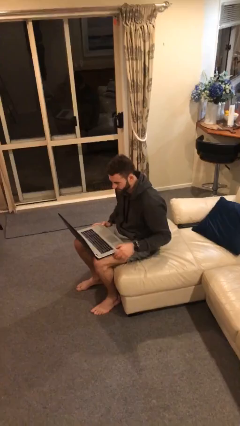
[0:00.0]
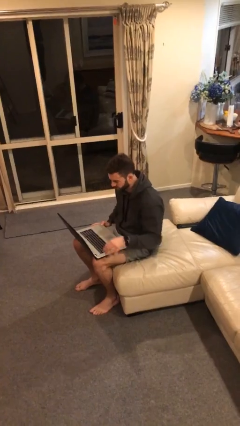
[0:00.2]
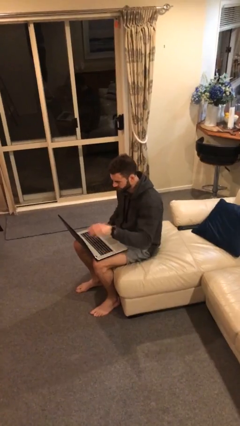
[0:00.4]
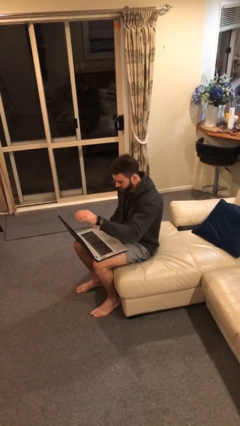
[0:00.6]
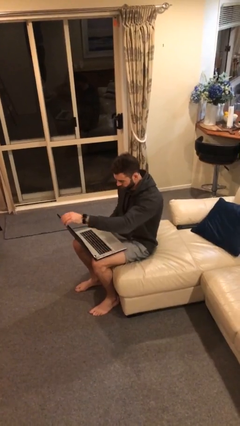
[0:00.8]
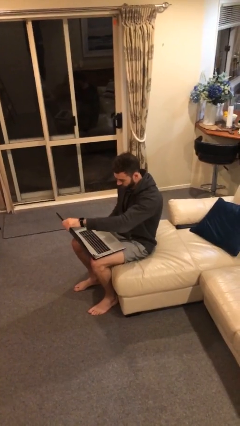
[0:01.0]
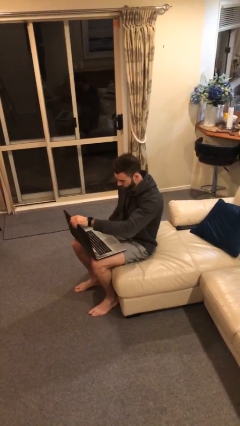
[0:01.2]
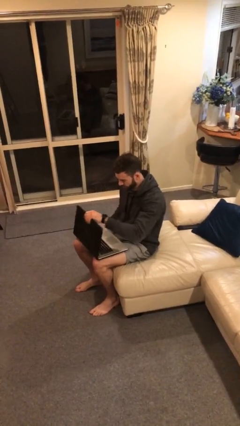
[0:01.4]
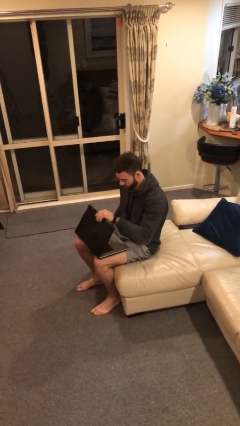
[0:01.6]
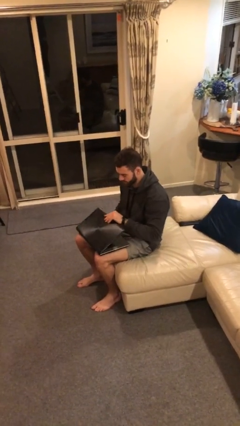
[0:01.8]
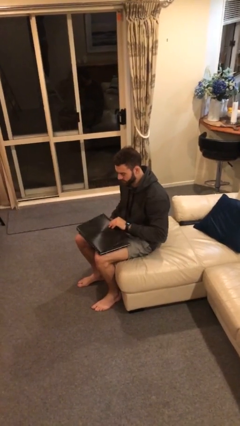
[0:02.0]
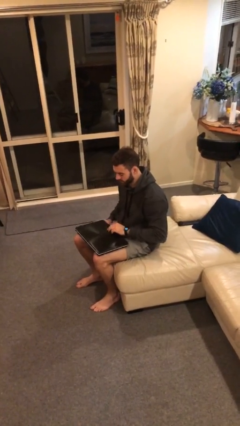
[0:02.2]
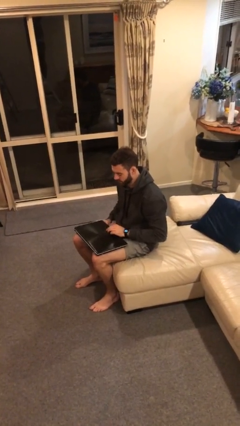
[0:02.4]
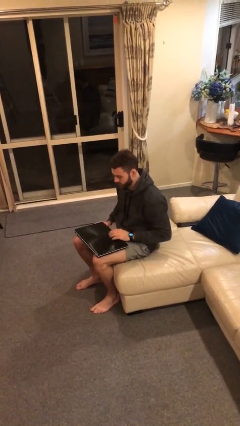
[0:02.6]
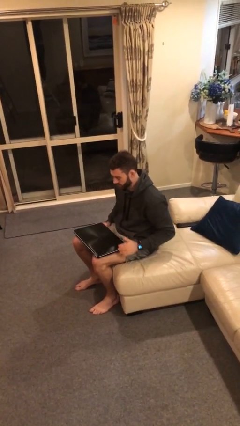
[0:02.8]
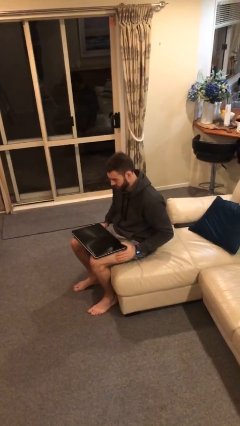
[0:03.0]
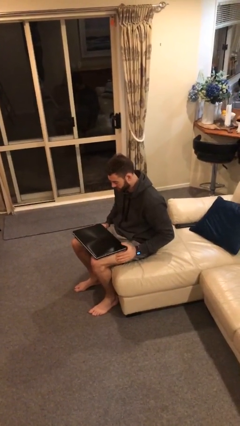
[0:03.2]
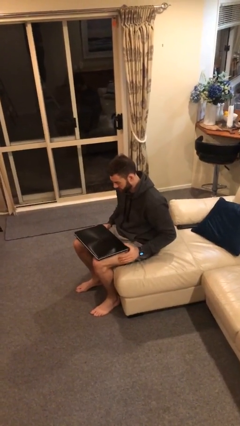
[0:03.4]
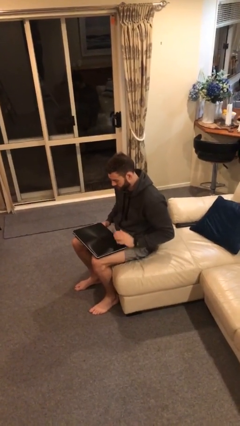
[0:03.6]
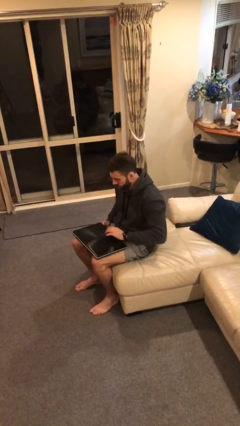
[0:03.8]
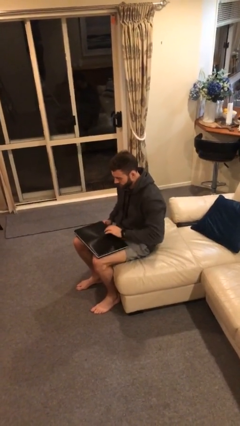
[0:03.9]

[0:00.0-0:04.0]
person closes laptop

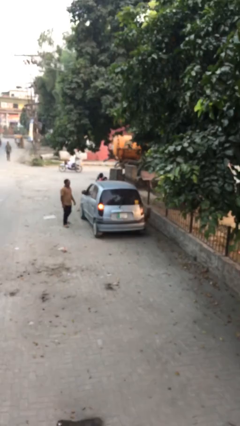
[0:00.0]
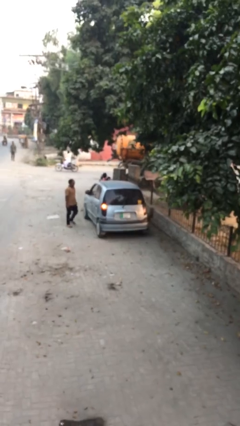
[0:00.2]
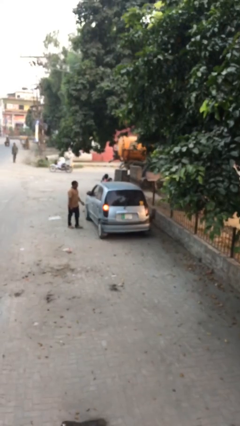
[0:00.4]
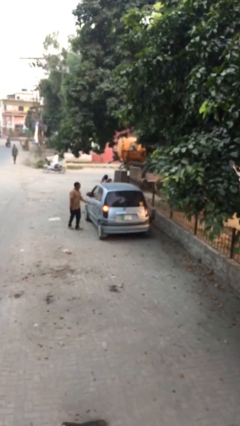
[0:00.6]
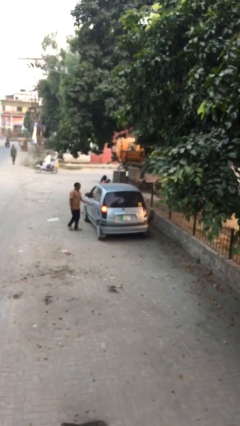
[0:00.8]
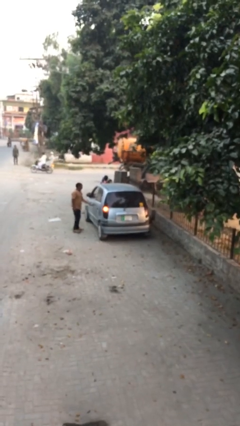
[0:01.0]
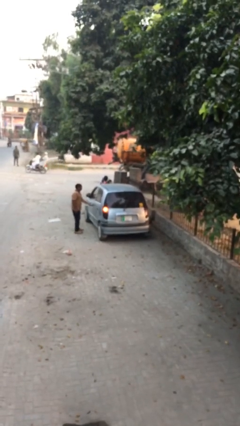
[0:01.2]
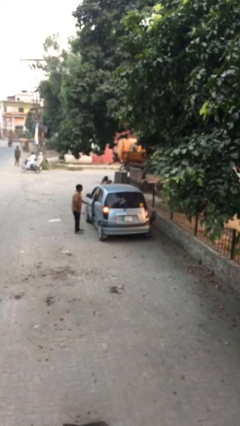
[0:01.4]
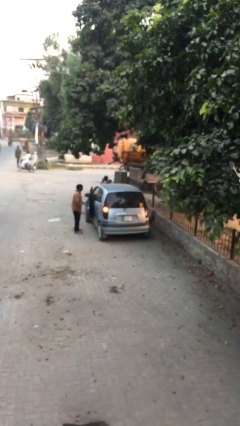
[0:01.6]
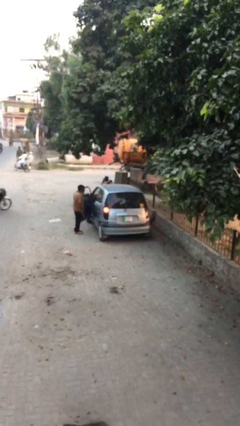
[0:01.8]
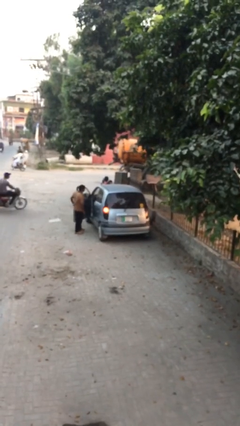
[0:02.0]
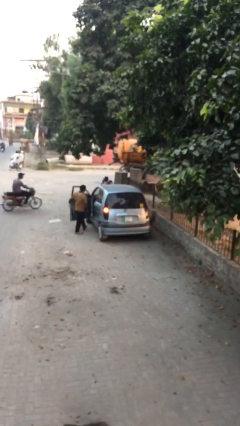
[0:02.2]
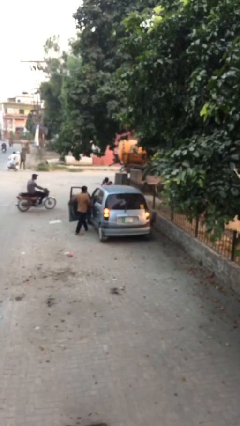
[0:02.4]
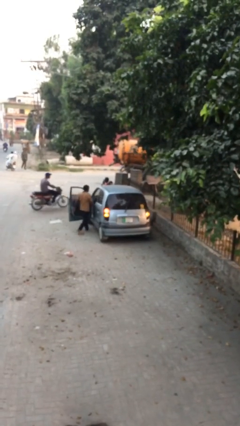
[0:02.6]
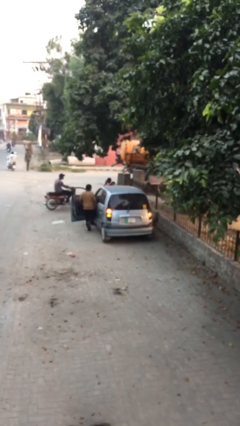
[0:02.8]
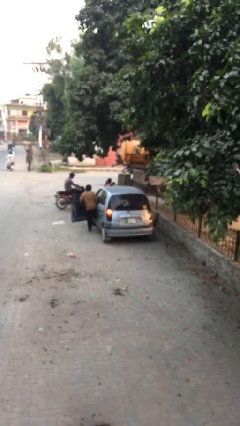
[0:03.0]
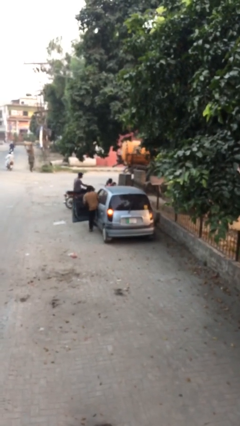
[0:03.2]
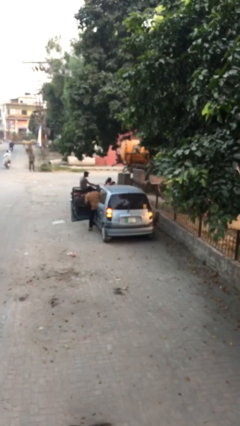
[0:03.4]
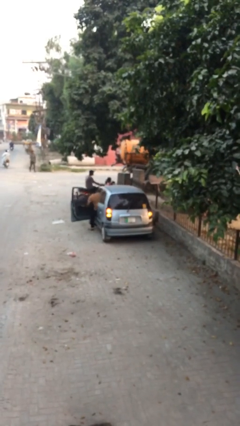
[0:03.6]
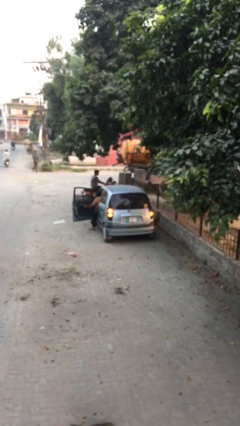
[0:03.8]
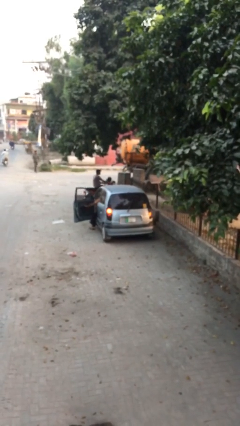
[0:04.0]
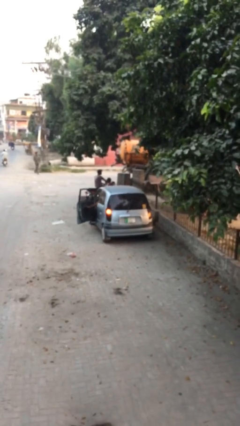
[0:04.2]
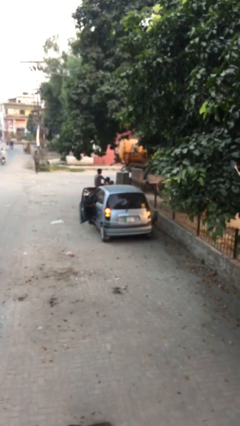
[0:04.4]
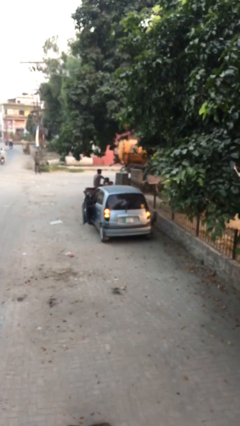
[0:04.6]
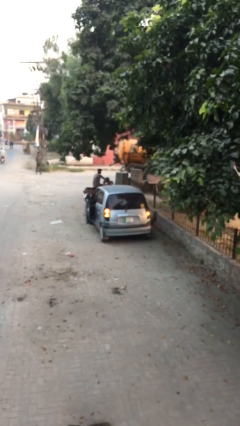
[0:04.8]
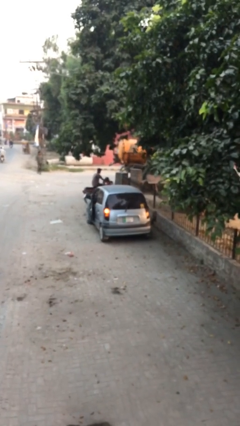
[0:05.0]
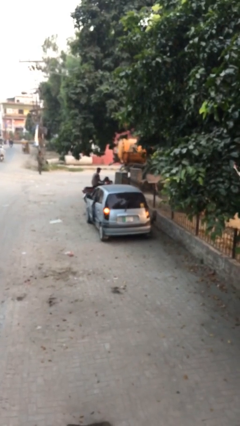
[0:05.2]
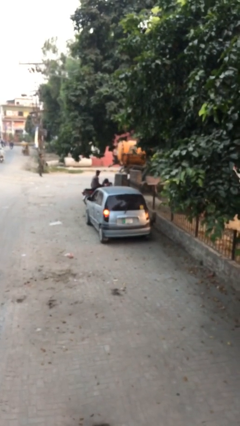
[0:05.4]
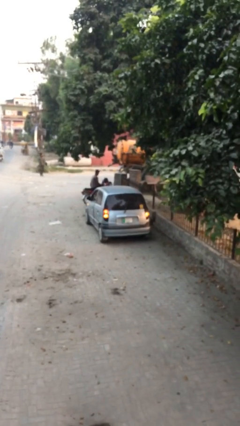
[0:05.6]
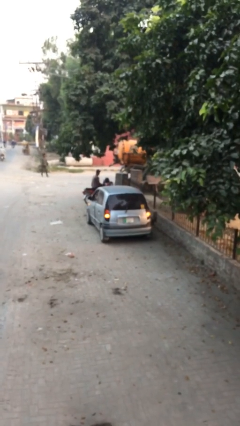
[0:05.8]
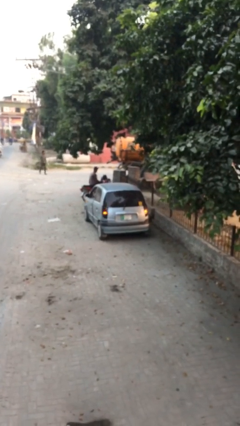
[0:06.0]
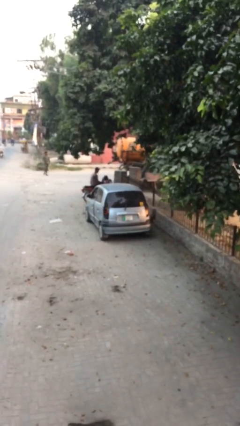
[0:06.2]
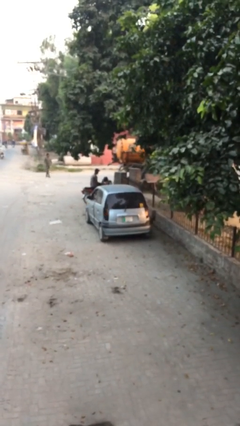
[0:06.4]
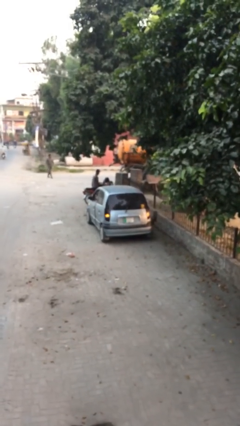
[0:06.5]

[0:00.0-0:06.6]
car picks up person

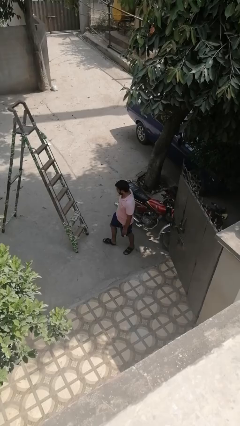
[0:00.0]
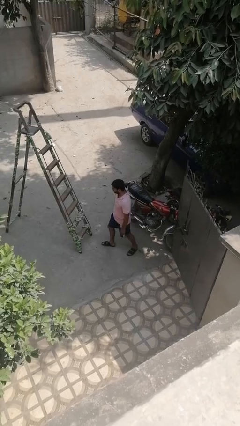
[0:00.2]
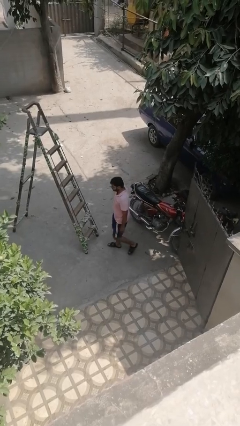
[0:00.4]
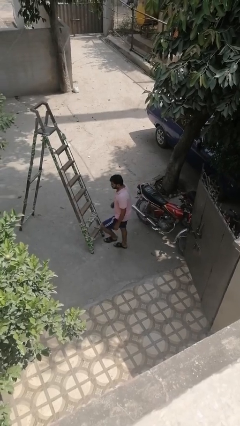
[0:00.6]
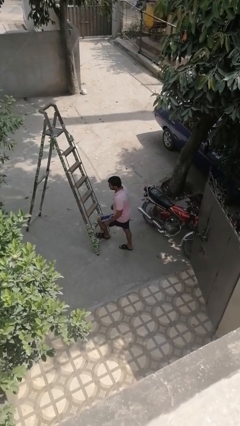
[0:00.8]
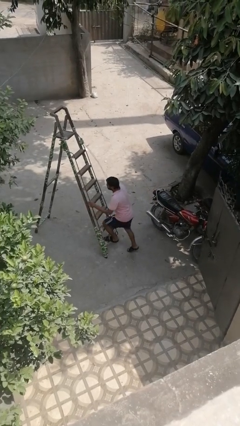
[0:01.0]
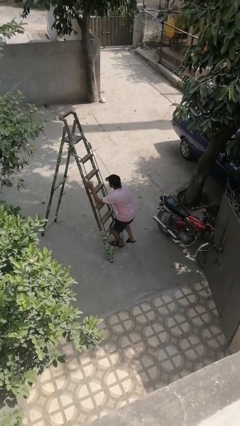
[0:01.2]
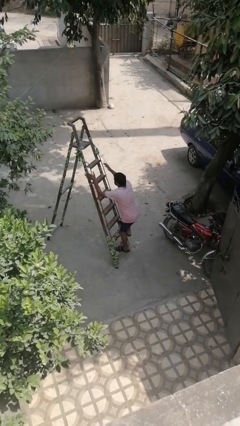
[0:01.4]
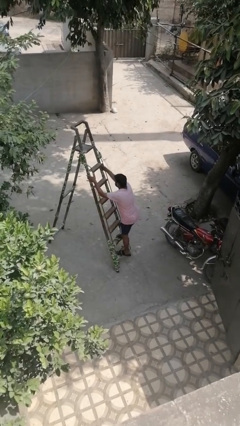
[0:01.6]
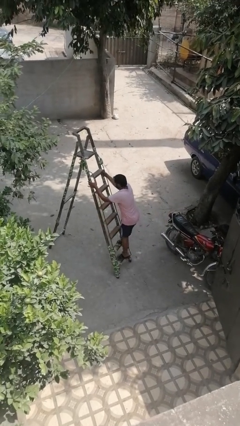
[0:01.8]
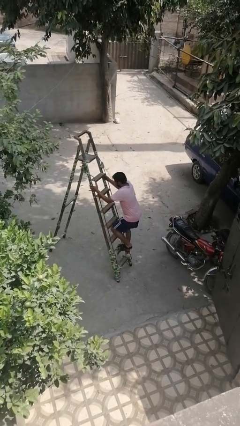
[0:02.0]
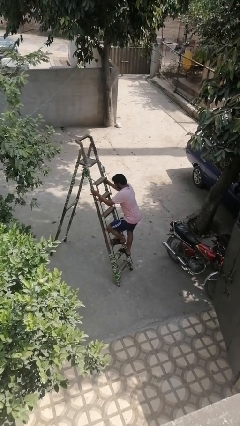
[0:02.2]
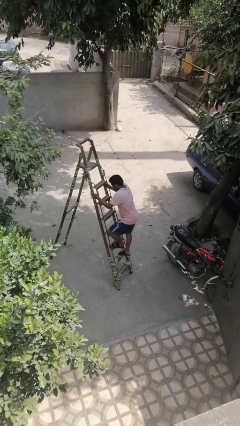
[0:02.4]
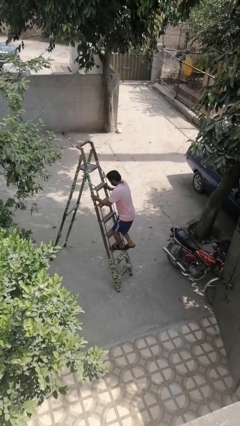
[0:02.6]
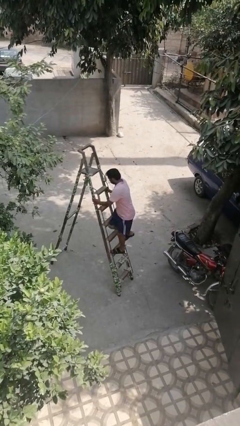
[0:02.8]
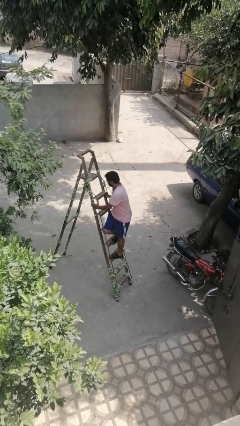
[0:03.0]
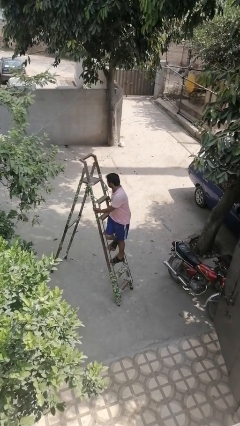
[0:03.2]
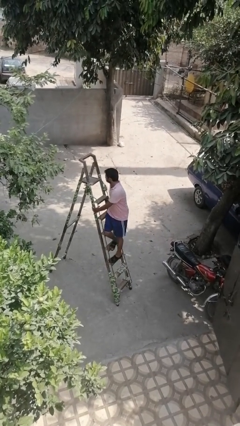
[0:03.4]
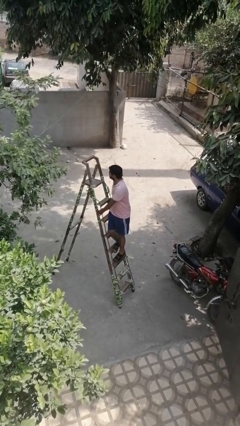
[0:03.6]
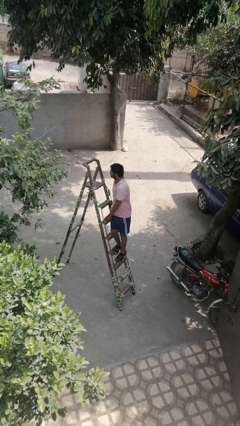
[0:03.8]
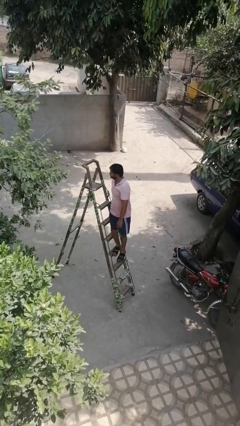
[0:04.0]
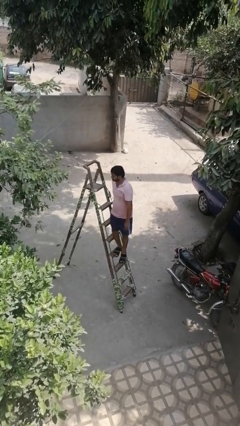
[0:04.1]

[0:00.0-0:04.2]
person climbs up ladder

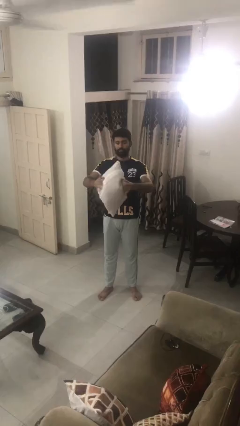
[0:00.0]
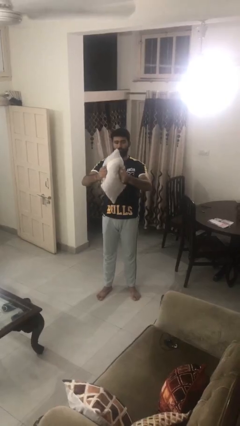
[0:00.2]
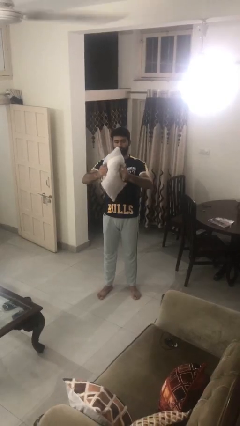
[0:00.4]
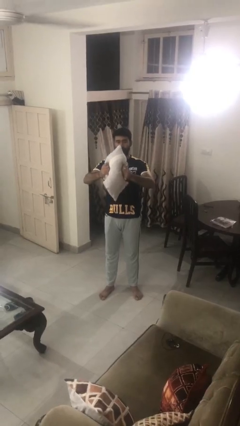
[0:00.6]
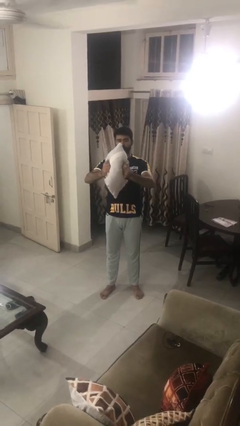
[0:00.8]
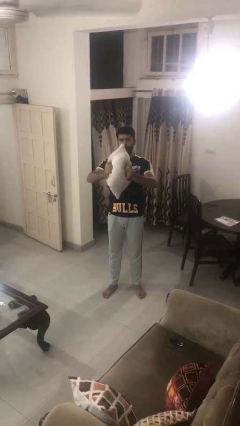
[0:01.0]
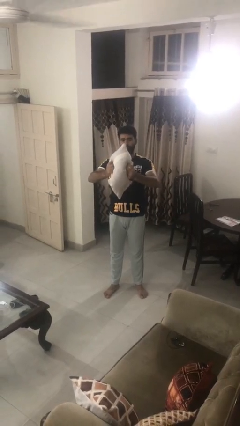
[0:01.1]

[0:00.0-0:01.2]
person squeezes object

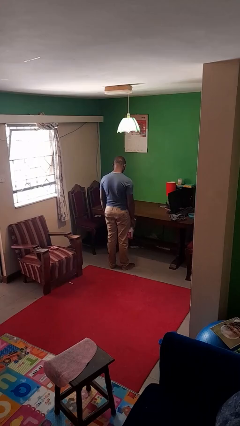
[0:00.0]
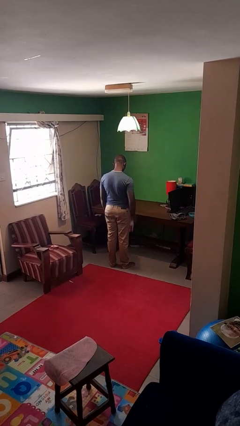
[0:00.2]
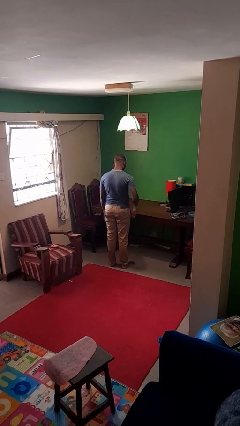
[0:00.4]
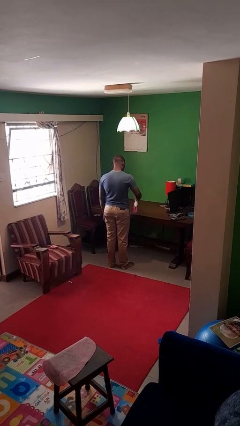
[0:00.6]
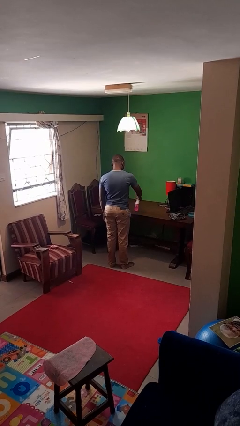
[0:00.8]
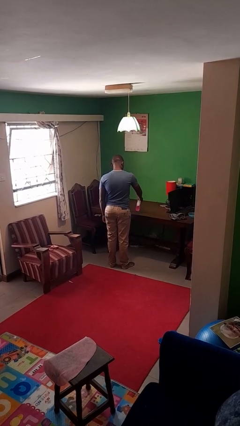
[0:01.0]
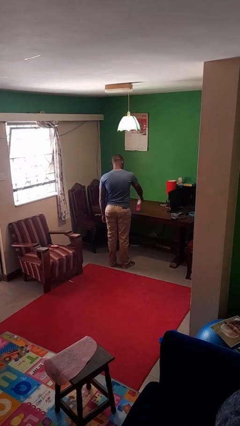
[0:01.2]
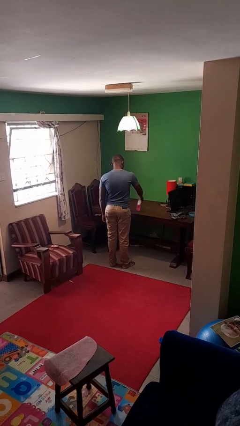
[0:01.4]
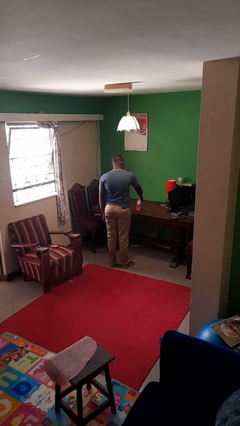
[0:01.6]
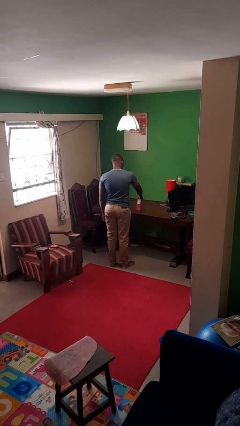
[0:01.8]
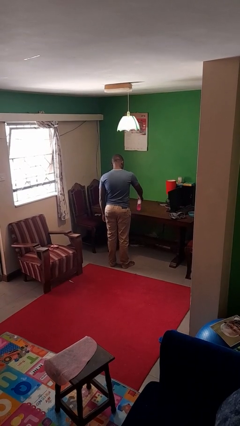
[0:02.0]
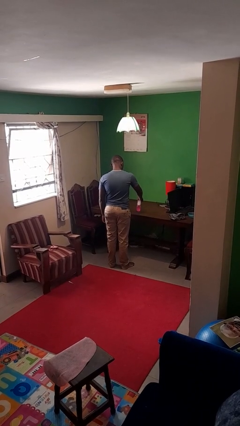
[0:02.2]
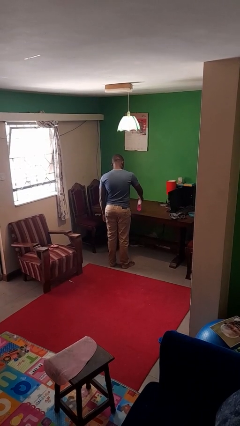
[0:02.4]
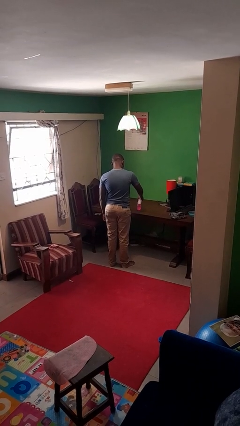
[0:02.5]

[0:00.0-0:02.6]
person sprays from bottle
